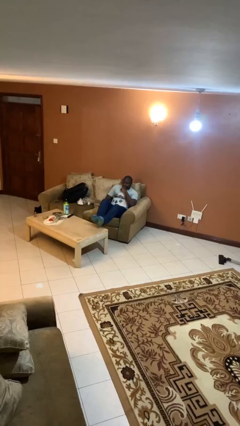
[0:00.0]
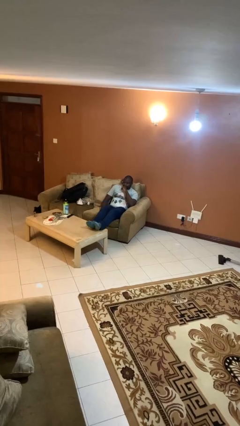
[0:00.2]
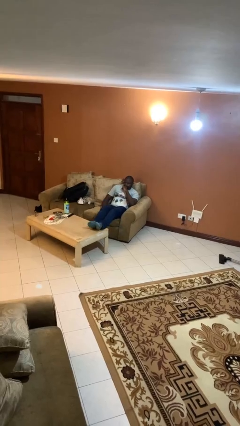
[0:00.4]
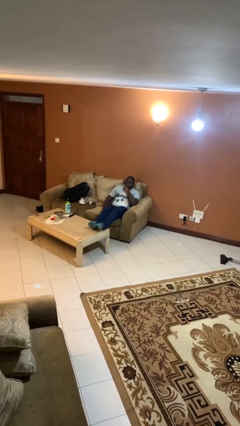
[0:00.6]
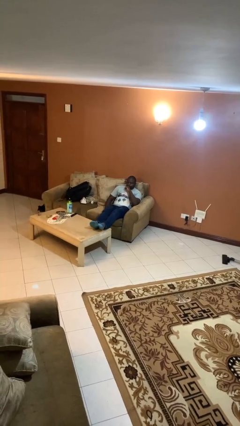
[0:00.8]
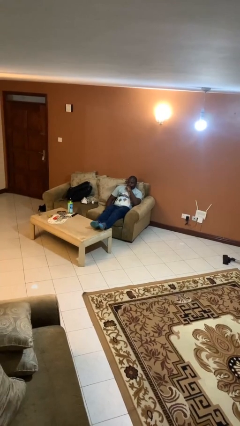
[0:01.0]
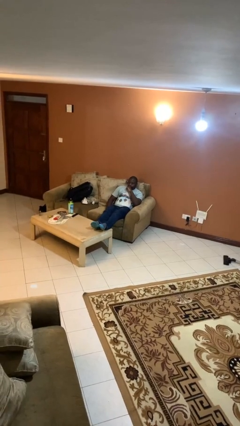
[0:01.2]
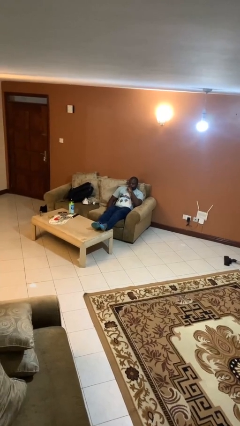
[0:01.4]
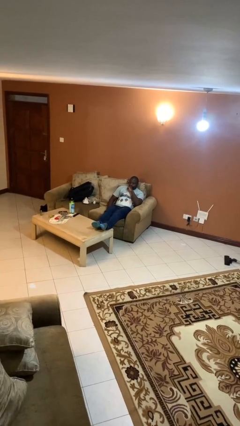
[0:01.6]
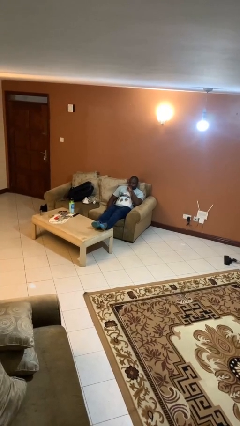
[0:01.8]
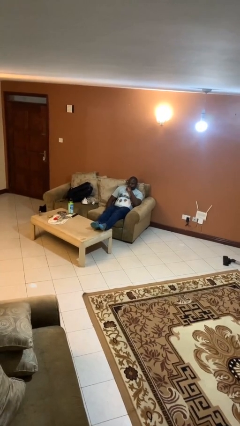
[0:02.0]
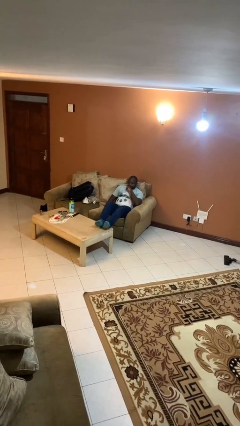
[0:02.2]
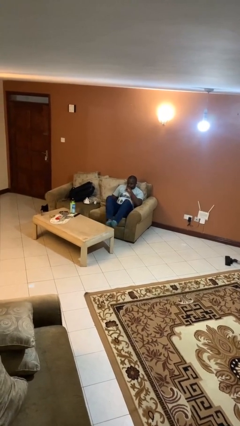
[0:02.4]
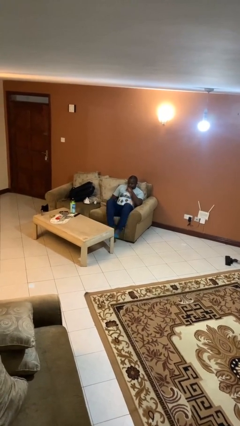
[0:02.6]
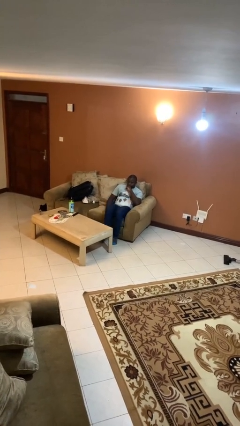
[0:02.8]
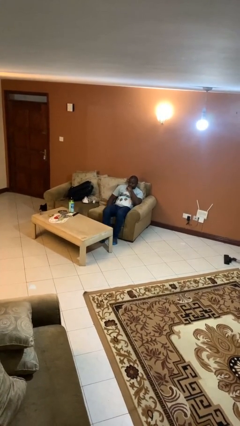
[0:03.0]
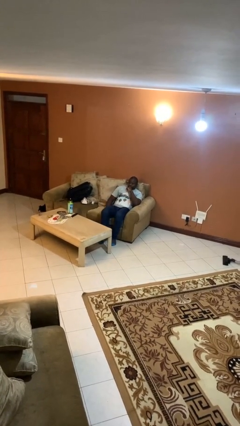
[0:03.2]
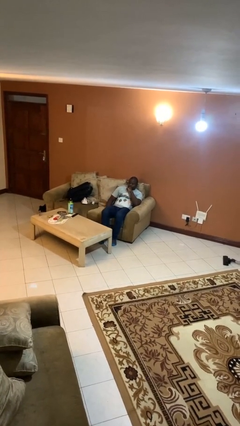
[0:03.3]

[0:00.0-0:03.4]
person puts feet up

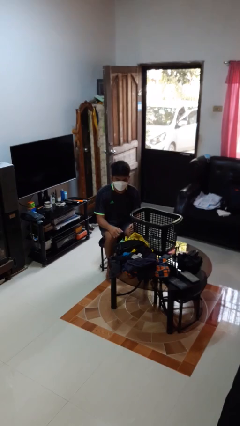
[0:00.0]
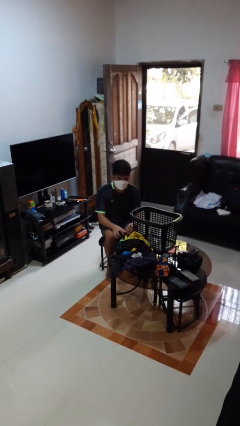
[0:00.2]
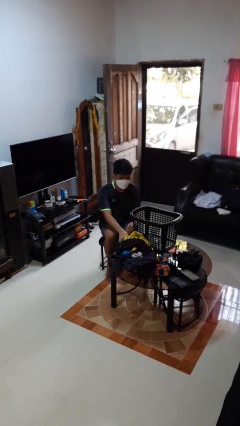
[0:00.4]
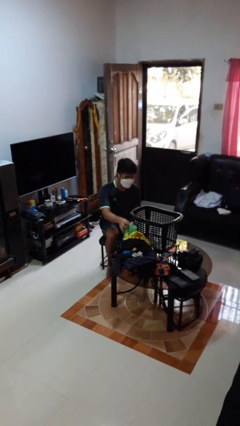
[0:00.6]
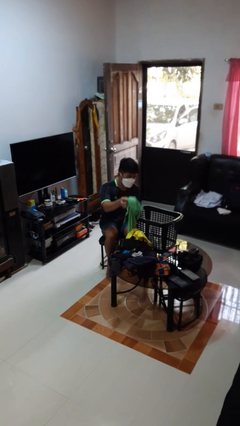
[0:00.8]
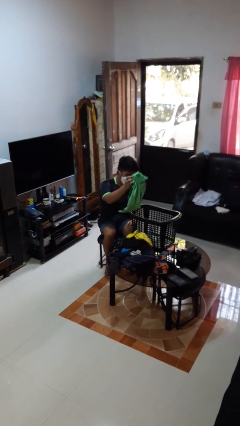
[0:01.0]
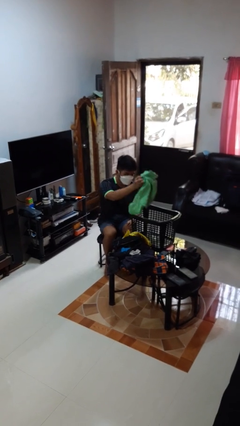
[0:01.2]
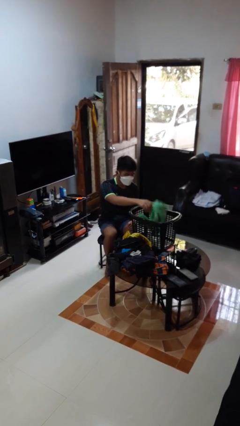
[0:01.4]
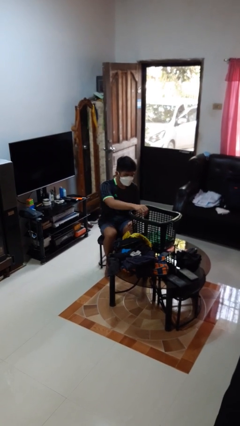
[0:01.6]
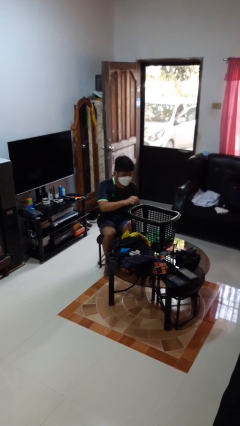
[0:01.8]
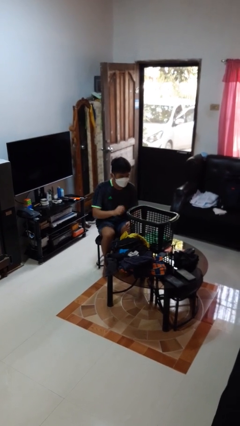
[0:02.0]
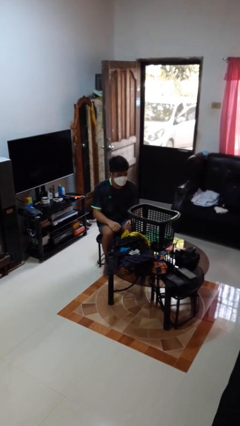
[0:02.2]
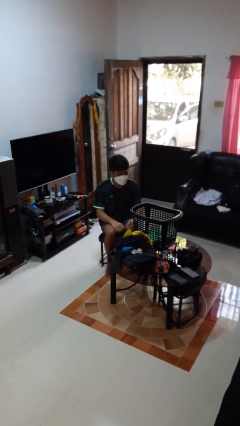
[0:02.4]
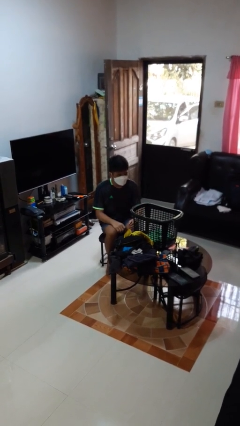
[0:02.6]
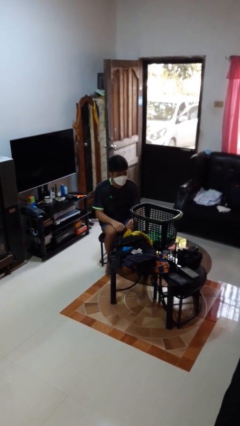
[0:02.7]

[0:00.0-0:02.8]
person puts object into basket

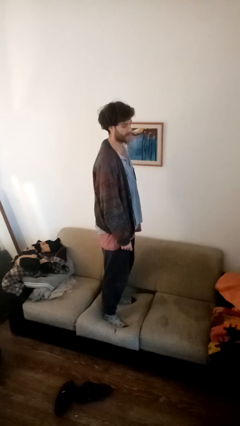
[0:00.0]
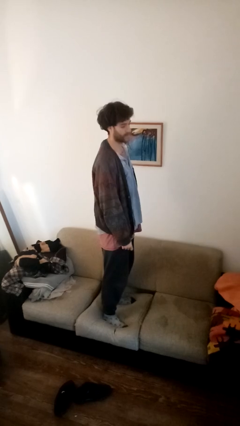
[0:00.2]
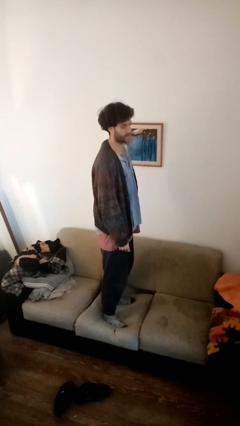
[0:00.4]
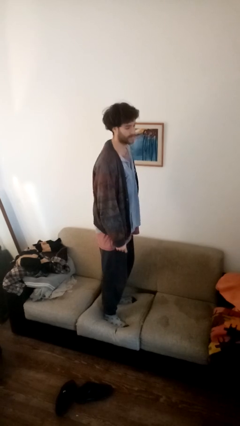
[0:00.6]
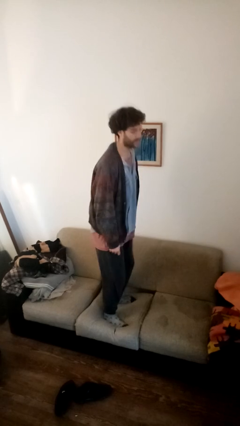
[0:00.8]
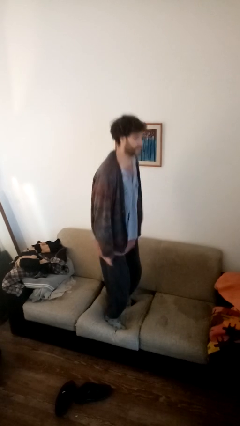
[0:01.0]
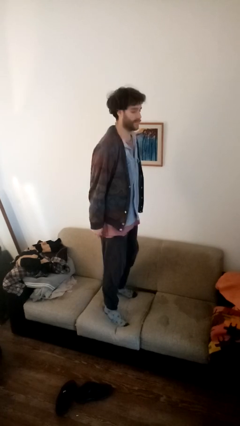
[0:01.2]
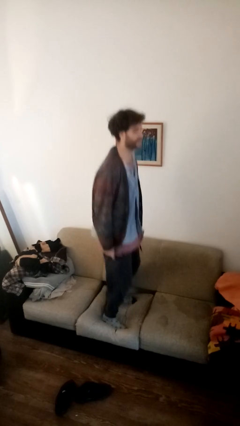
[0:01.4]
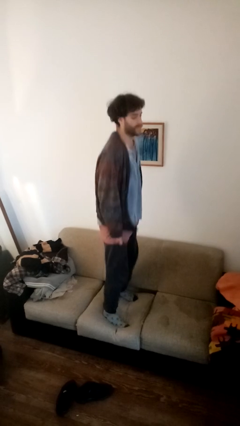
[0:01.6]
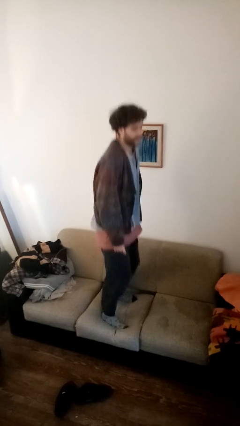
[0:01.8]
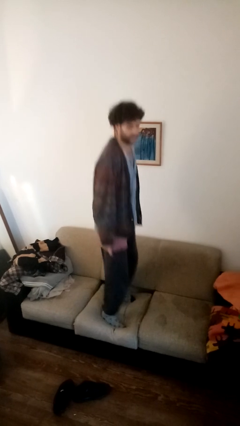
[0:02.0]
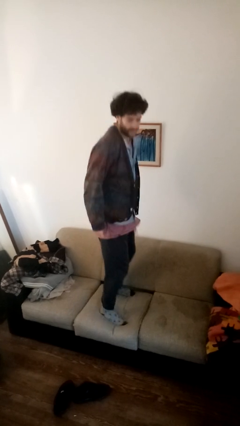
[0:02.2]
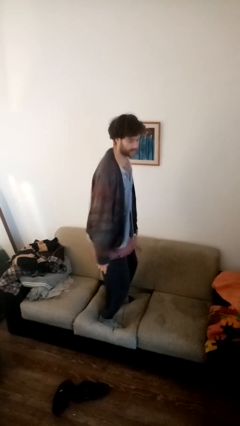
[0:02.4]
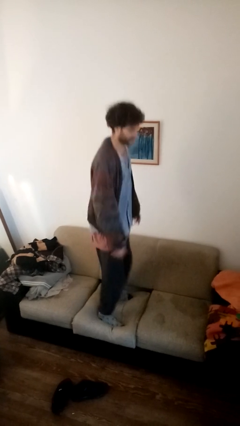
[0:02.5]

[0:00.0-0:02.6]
person jumps on couch

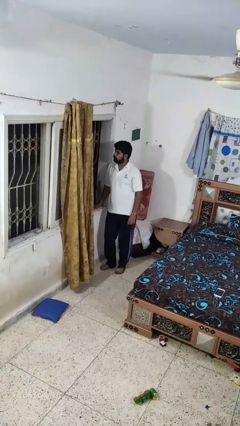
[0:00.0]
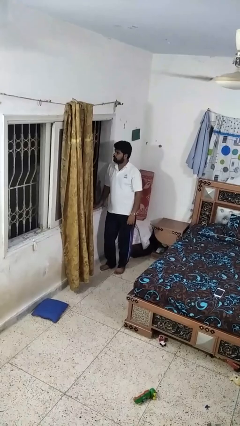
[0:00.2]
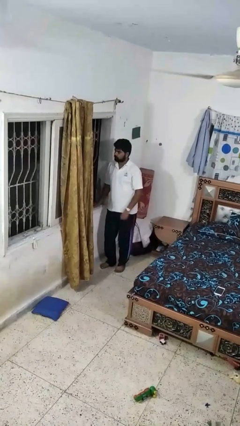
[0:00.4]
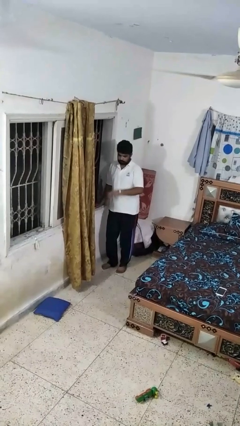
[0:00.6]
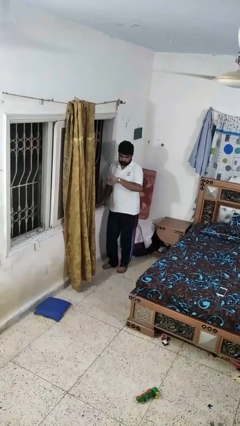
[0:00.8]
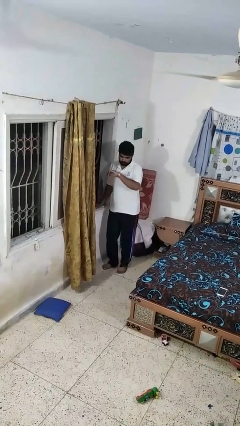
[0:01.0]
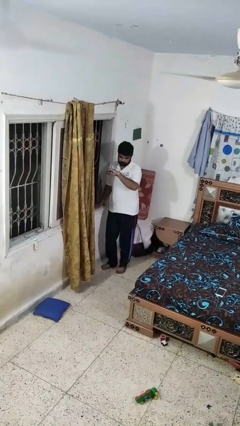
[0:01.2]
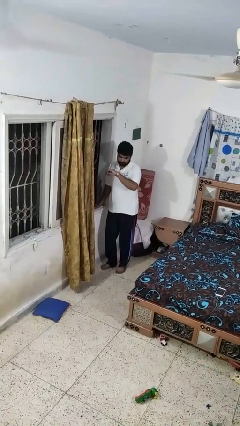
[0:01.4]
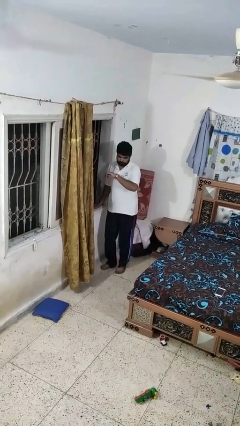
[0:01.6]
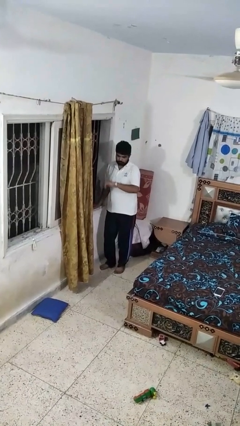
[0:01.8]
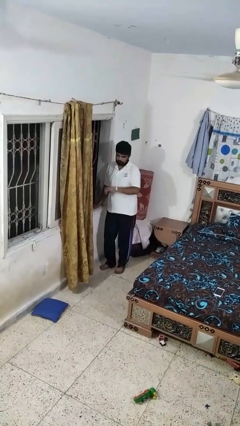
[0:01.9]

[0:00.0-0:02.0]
person looks at wristwatch

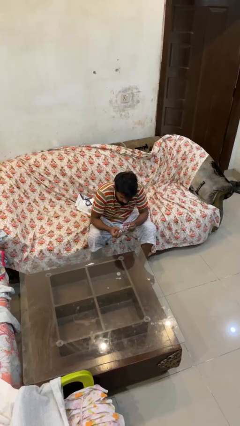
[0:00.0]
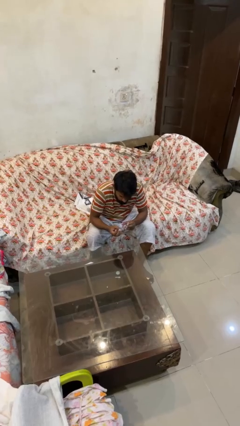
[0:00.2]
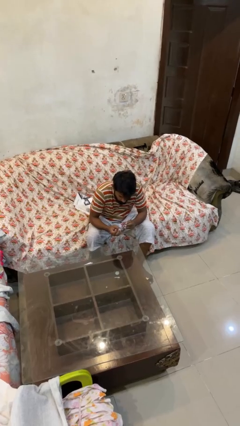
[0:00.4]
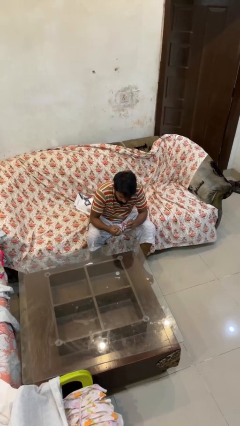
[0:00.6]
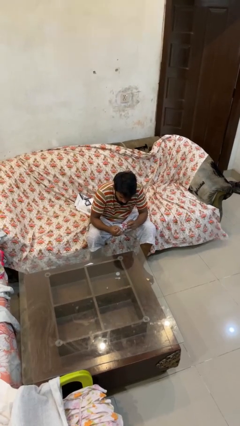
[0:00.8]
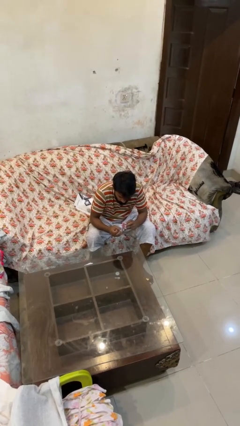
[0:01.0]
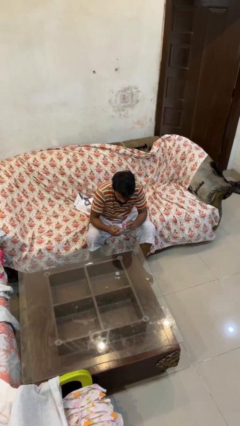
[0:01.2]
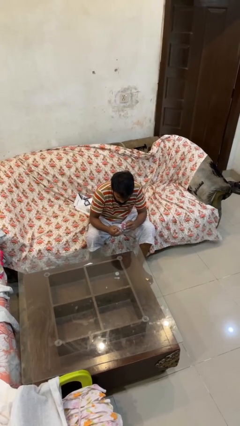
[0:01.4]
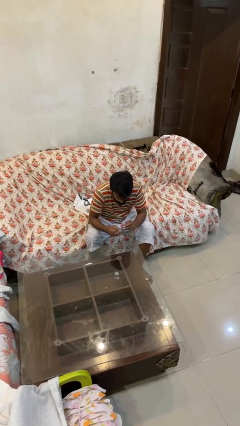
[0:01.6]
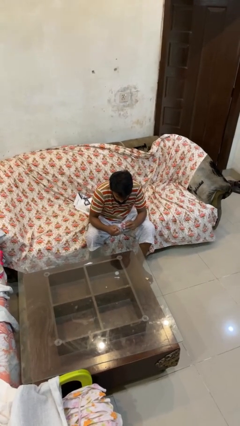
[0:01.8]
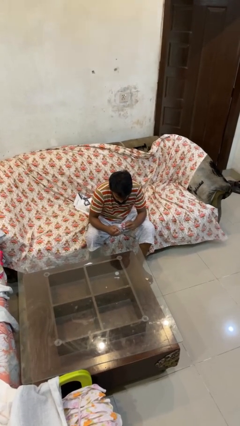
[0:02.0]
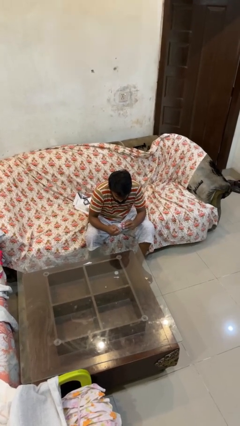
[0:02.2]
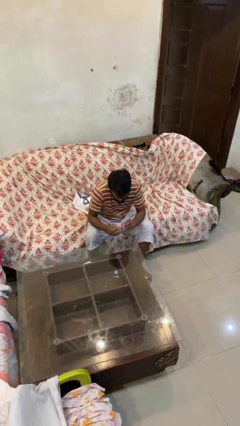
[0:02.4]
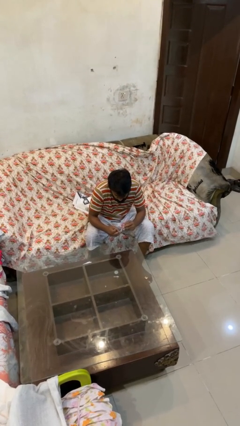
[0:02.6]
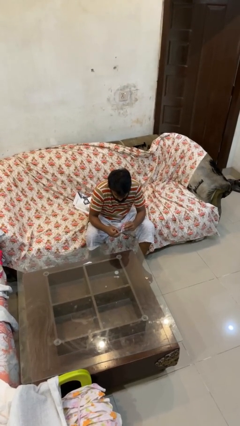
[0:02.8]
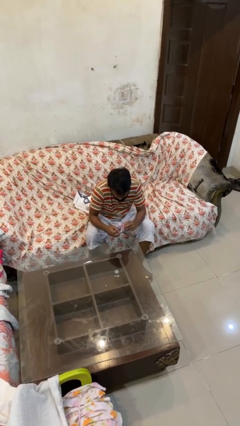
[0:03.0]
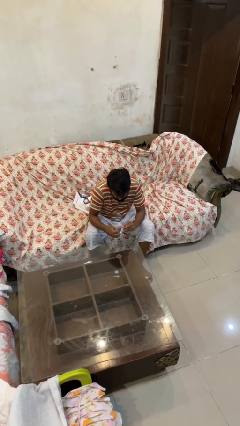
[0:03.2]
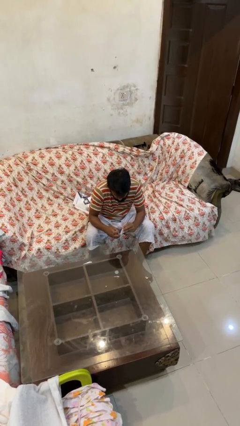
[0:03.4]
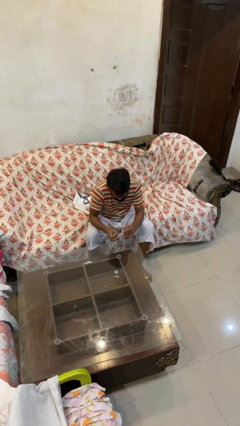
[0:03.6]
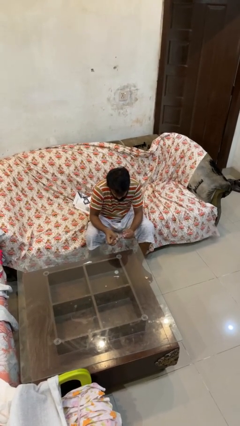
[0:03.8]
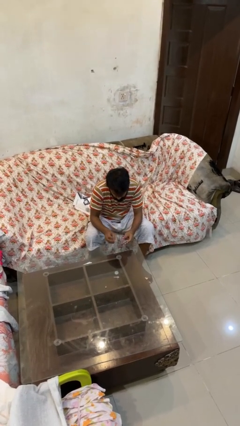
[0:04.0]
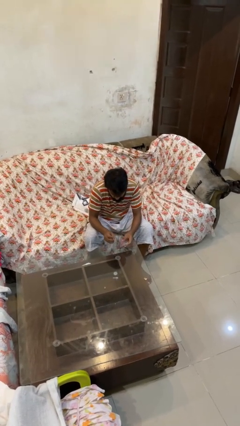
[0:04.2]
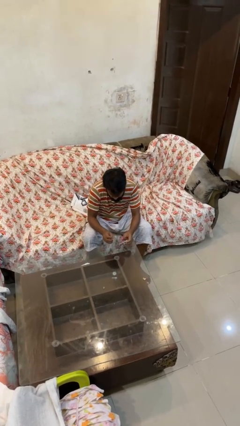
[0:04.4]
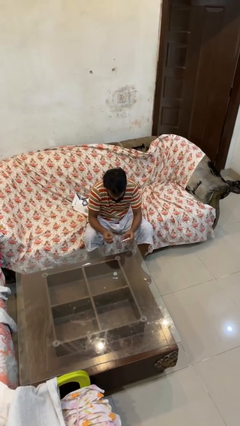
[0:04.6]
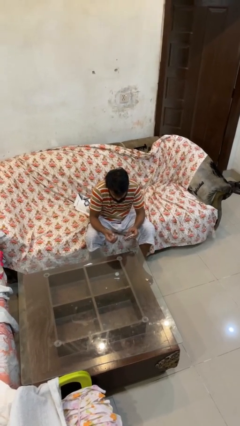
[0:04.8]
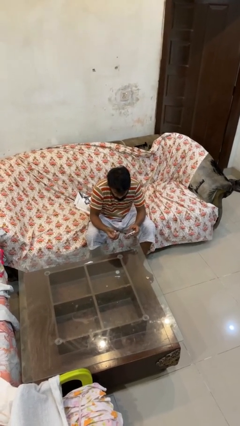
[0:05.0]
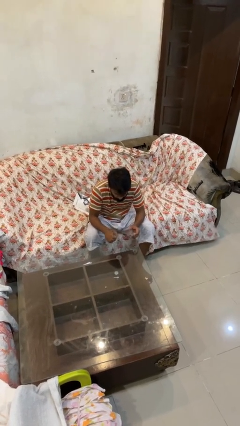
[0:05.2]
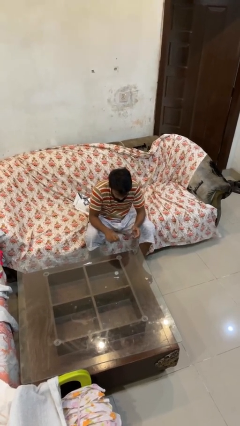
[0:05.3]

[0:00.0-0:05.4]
person clips fingernails

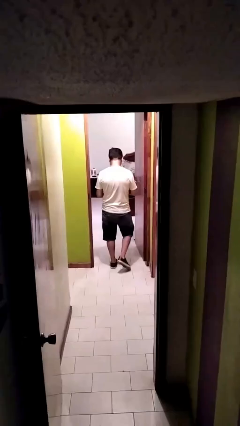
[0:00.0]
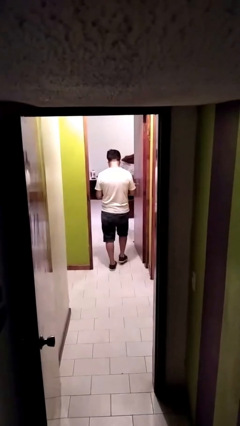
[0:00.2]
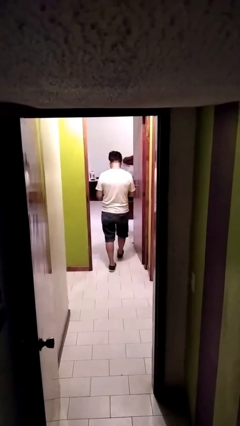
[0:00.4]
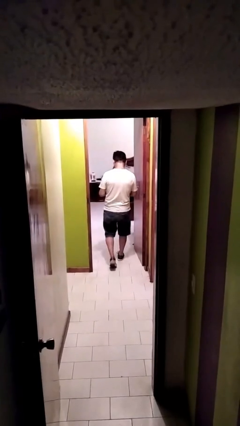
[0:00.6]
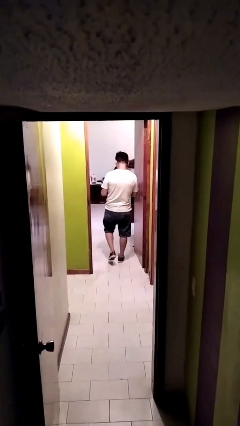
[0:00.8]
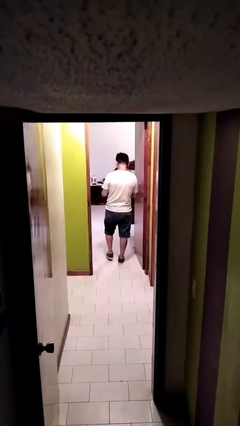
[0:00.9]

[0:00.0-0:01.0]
person exits scene through structure
